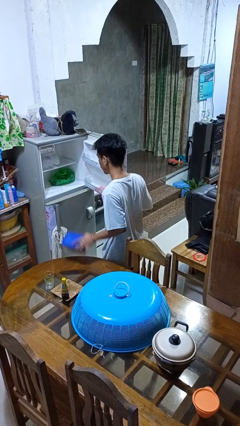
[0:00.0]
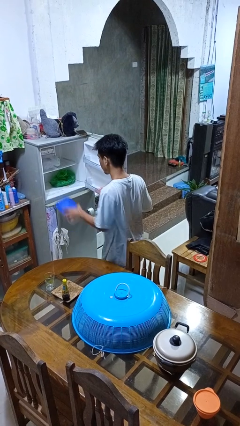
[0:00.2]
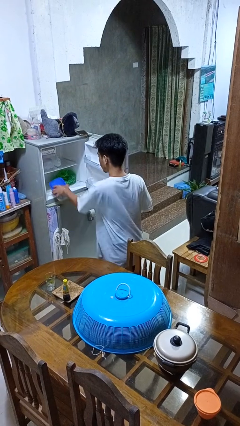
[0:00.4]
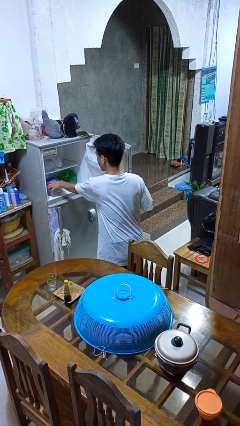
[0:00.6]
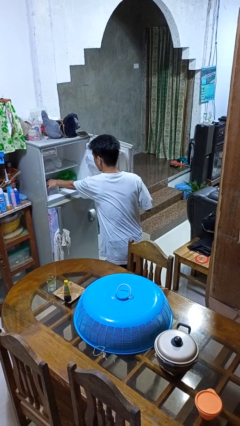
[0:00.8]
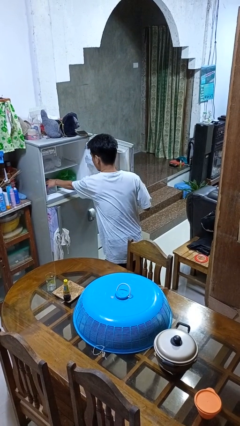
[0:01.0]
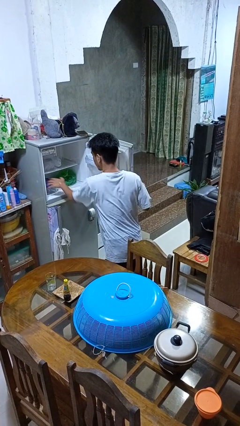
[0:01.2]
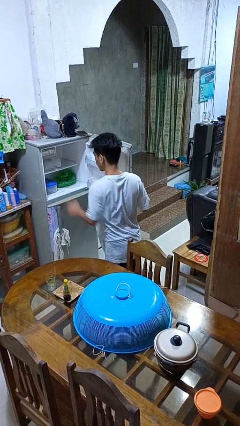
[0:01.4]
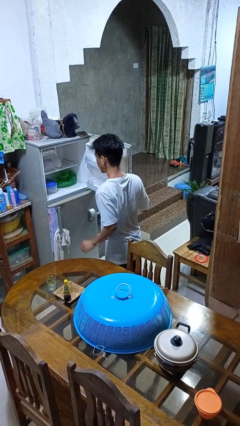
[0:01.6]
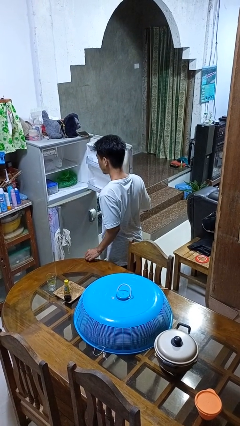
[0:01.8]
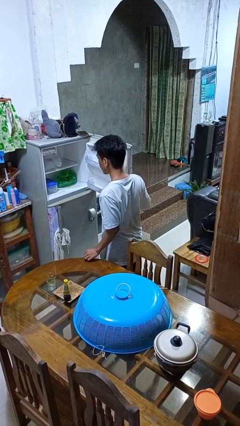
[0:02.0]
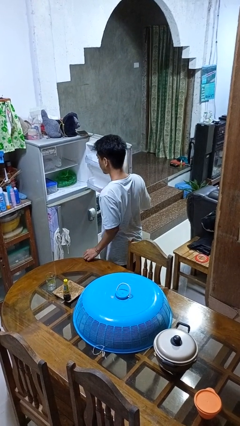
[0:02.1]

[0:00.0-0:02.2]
person puts object into refrigerator

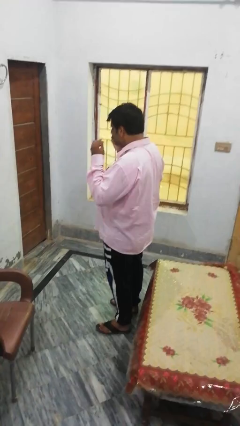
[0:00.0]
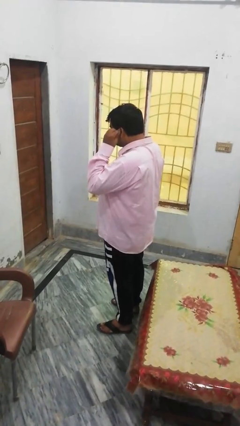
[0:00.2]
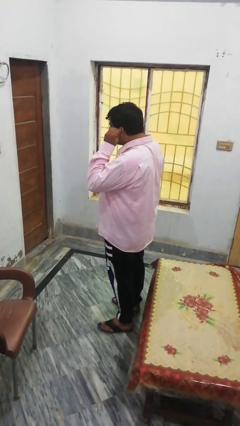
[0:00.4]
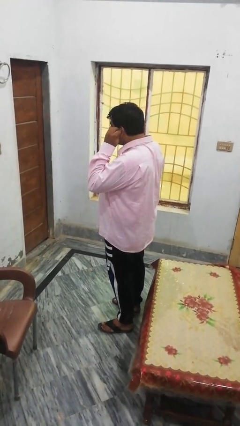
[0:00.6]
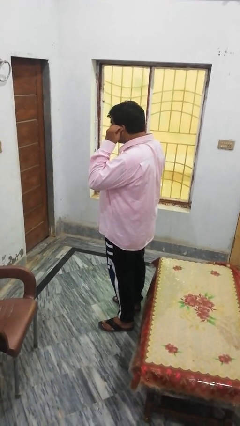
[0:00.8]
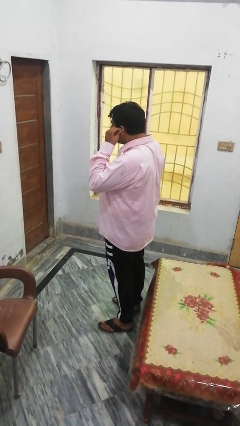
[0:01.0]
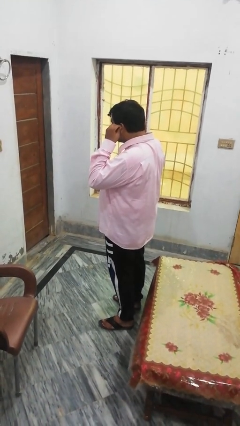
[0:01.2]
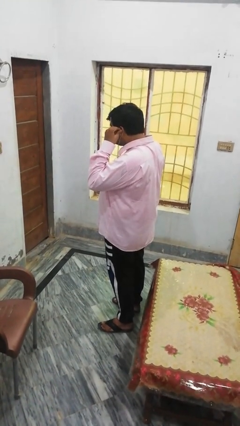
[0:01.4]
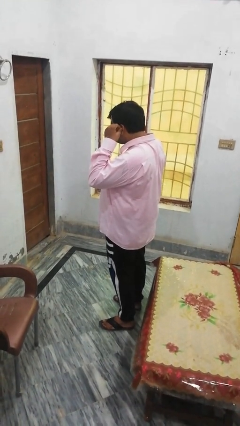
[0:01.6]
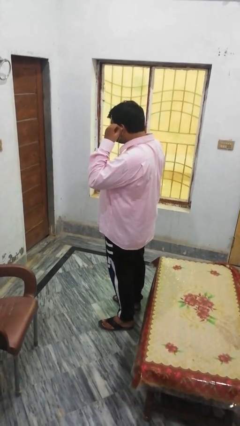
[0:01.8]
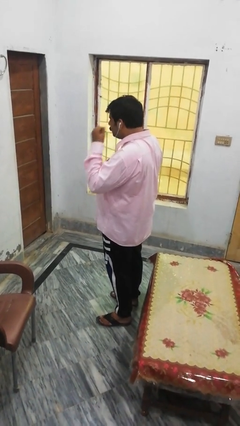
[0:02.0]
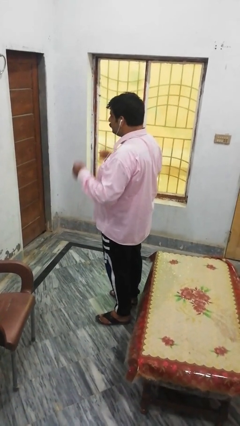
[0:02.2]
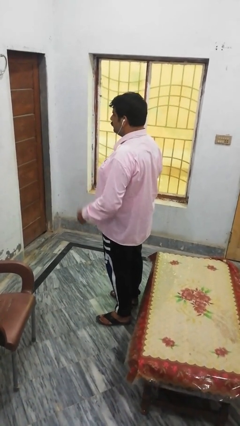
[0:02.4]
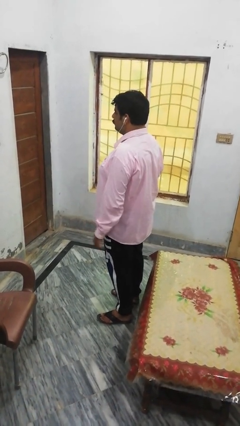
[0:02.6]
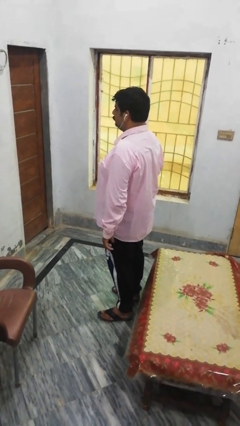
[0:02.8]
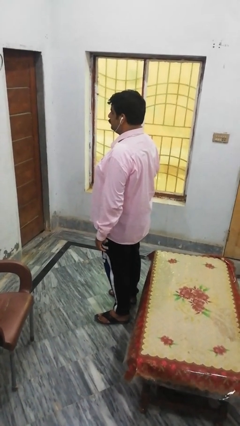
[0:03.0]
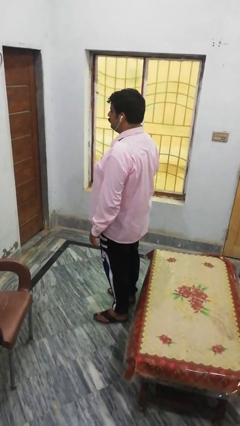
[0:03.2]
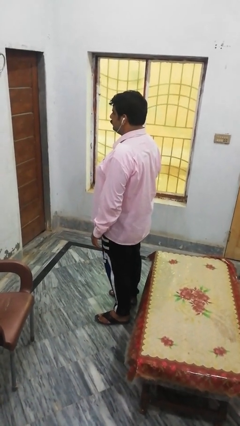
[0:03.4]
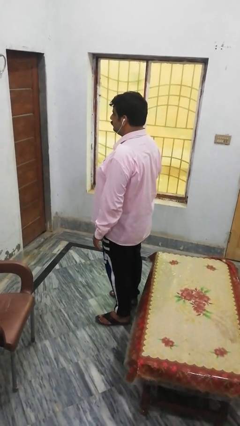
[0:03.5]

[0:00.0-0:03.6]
person puts on headphones

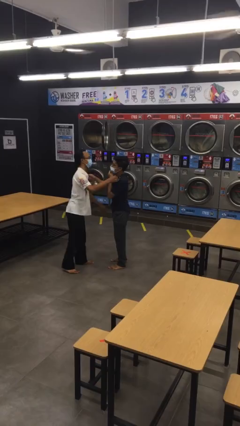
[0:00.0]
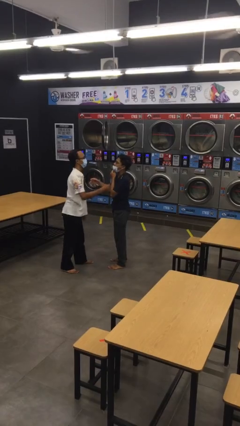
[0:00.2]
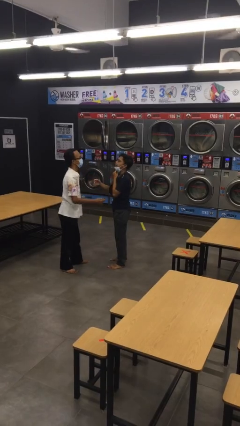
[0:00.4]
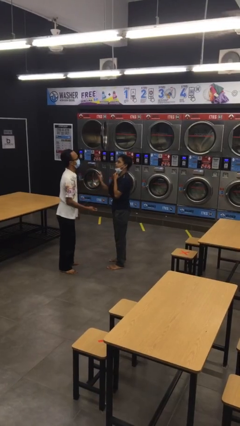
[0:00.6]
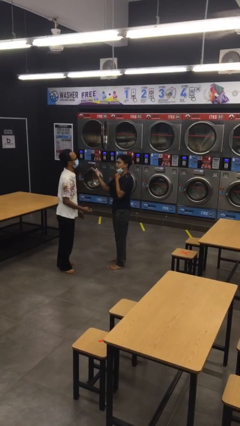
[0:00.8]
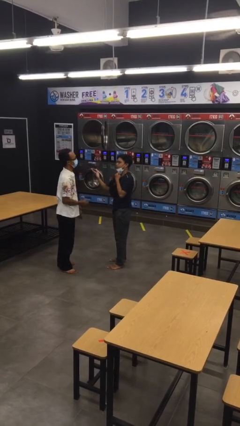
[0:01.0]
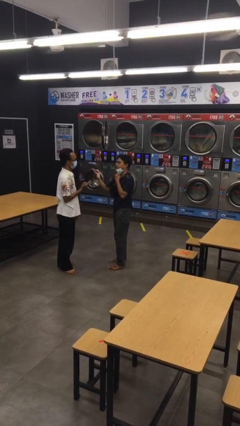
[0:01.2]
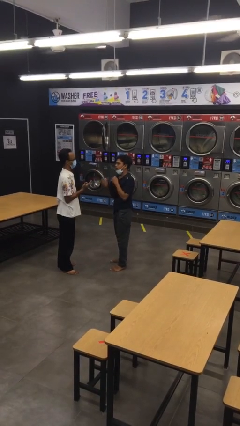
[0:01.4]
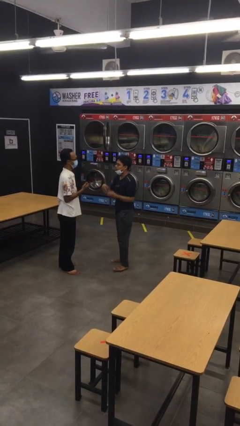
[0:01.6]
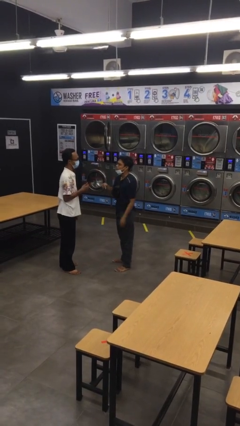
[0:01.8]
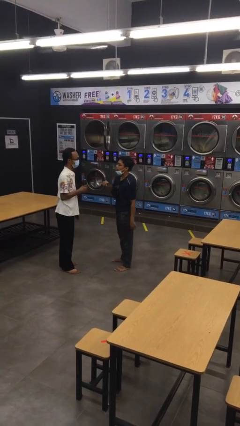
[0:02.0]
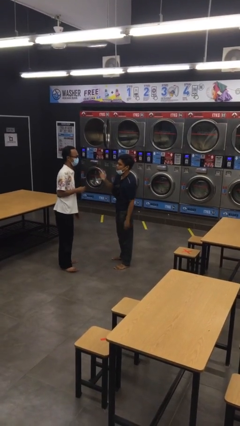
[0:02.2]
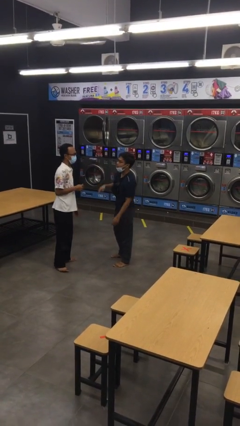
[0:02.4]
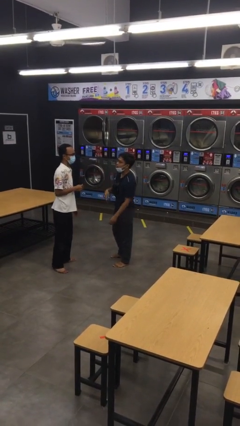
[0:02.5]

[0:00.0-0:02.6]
person talks to person

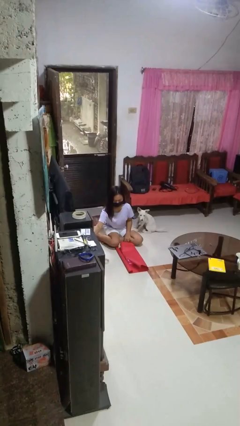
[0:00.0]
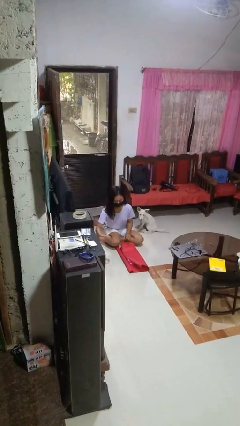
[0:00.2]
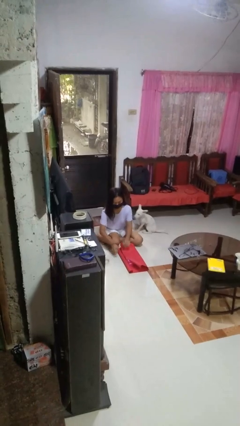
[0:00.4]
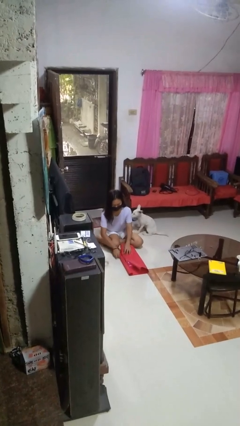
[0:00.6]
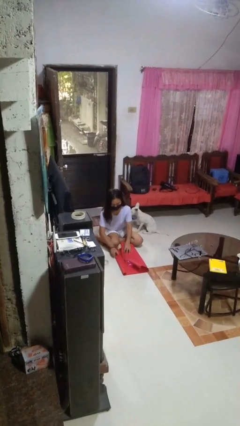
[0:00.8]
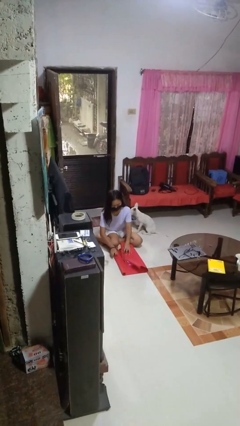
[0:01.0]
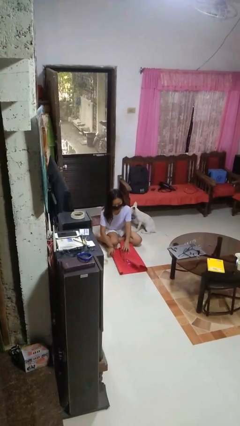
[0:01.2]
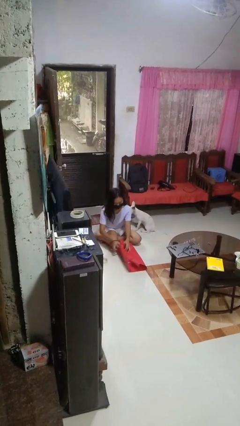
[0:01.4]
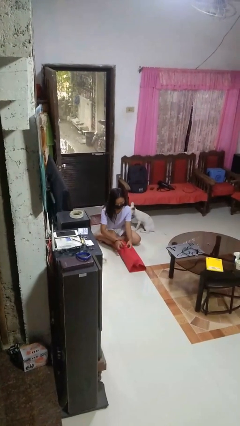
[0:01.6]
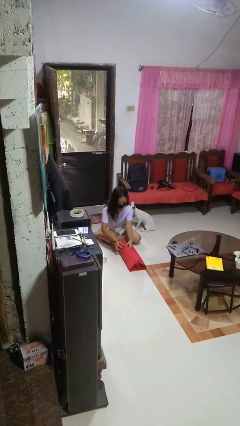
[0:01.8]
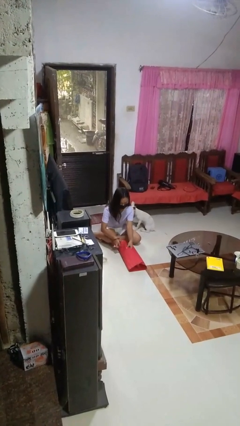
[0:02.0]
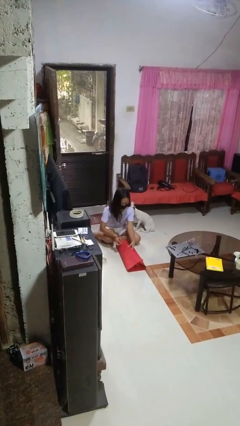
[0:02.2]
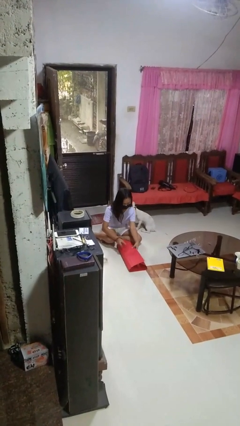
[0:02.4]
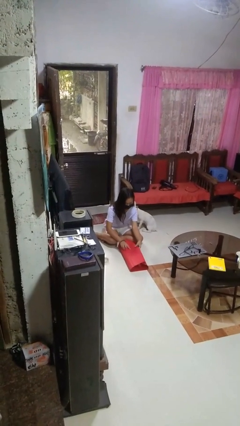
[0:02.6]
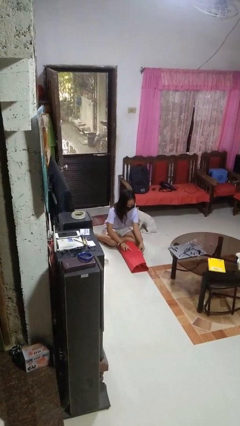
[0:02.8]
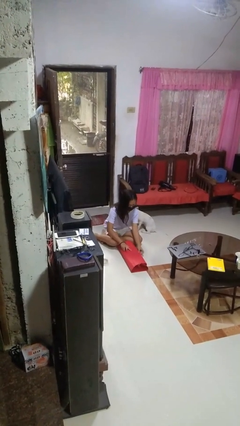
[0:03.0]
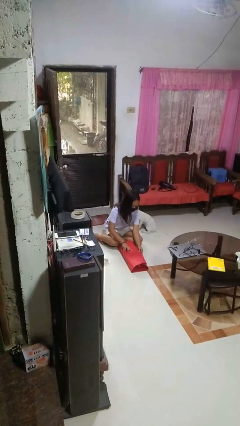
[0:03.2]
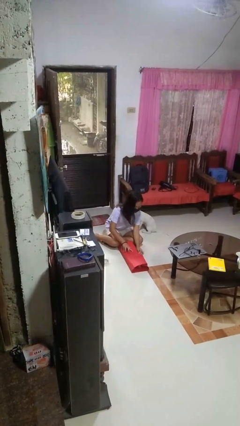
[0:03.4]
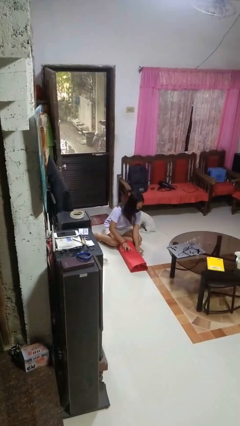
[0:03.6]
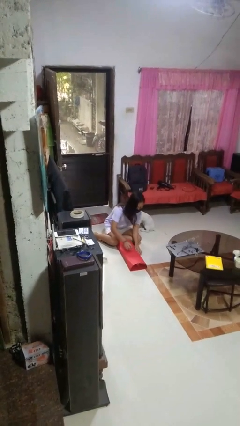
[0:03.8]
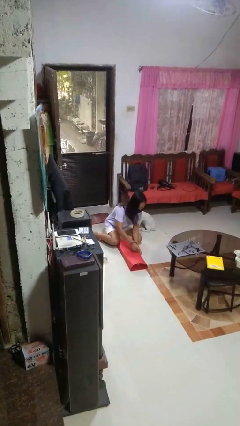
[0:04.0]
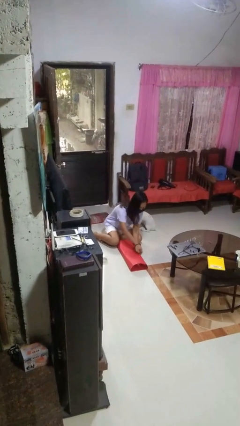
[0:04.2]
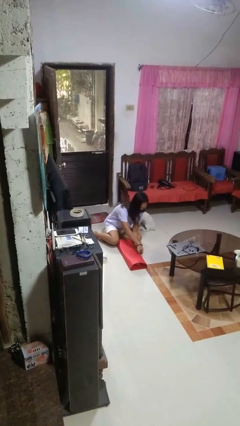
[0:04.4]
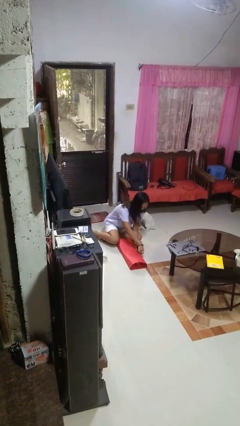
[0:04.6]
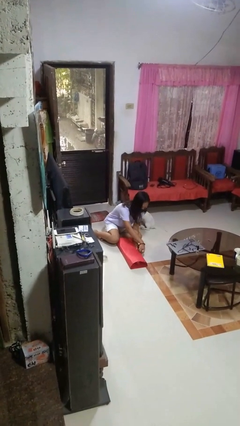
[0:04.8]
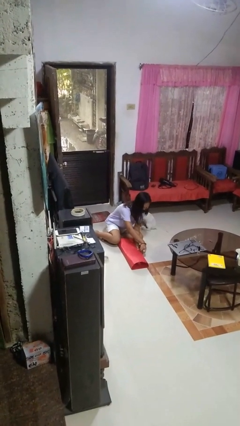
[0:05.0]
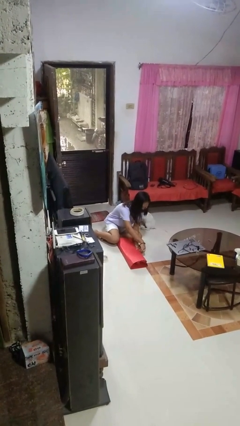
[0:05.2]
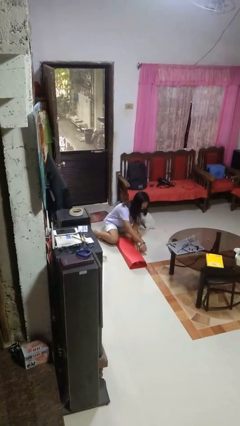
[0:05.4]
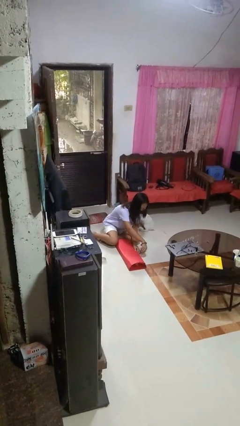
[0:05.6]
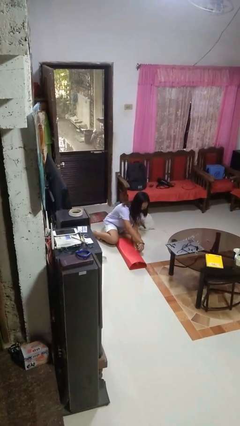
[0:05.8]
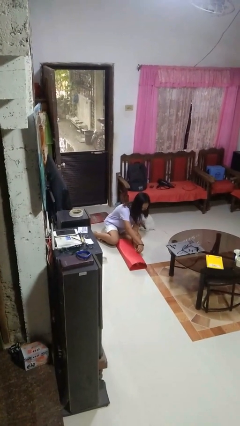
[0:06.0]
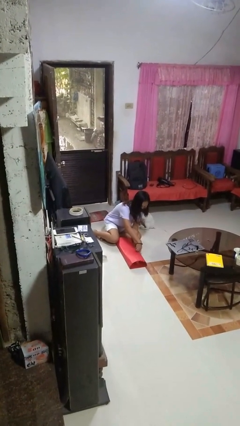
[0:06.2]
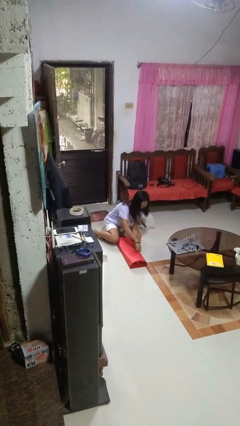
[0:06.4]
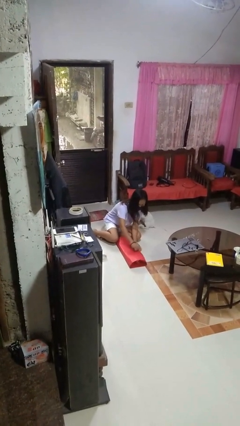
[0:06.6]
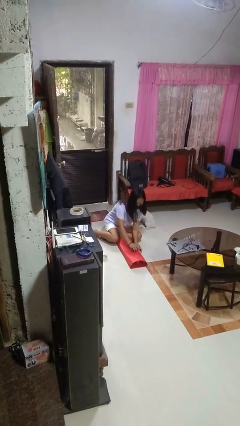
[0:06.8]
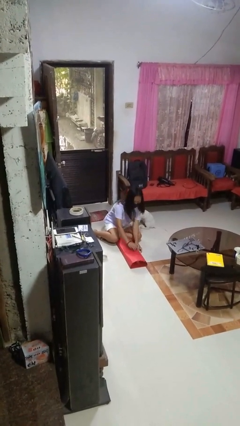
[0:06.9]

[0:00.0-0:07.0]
person wraps box

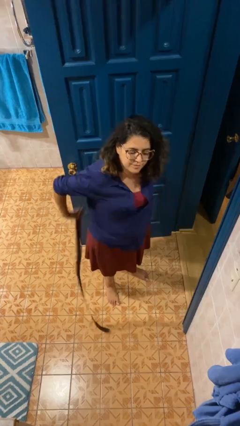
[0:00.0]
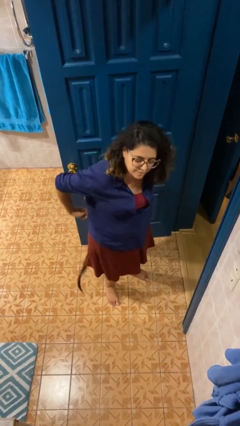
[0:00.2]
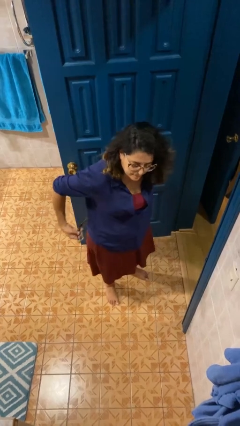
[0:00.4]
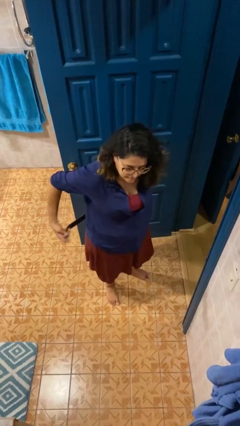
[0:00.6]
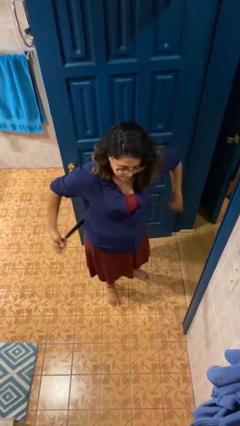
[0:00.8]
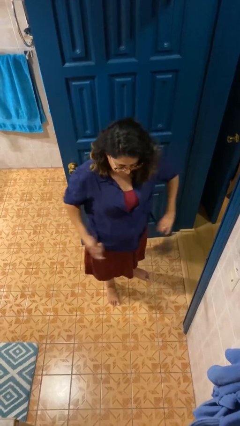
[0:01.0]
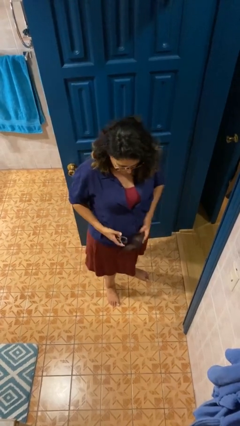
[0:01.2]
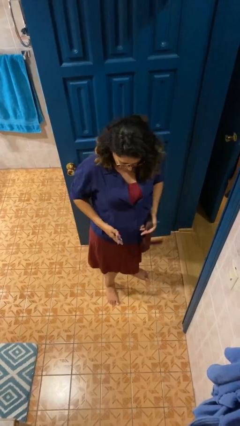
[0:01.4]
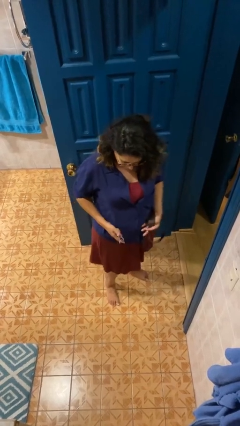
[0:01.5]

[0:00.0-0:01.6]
person puts on belt

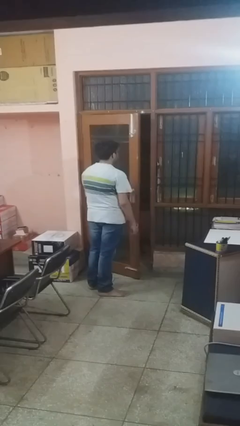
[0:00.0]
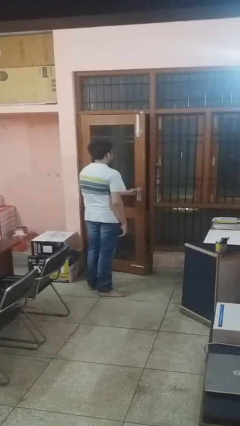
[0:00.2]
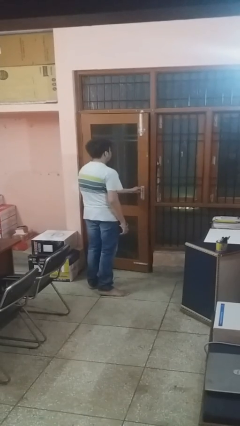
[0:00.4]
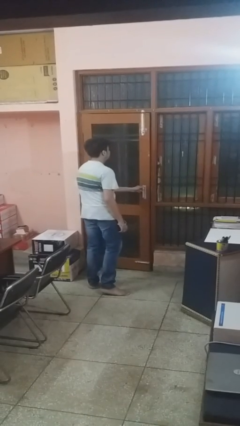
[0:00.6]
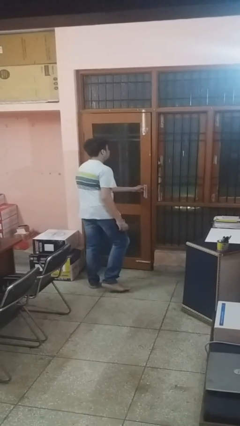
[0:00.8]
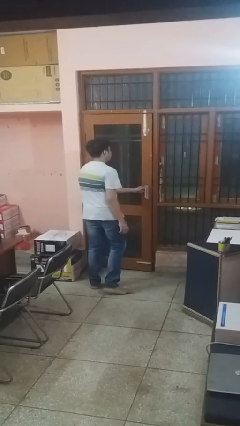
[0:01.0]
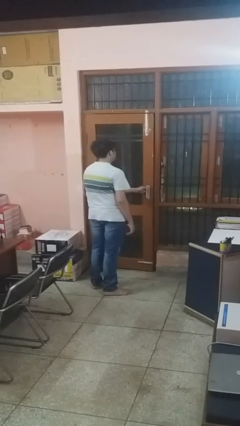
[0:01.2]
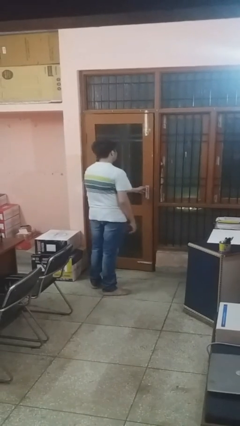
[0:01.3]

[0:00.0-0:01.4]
person closes facility door
